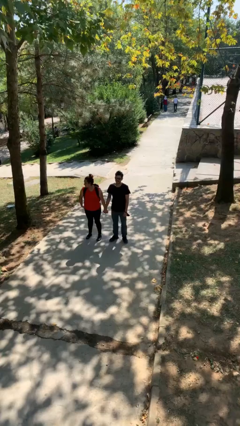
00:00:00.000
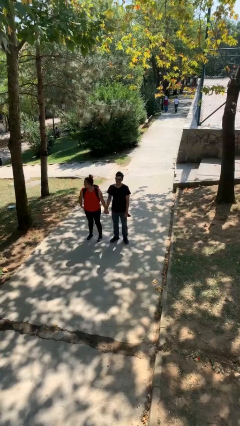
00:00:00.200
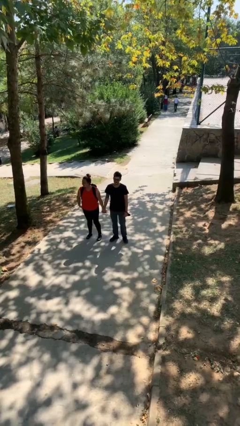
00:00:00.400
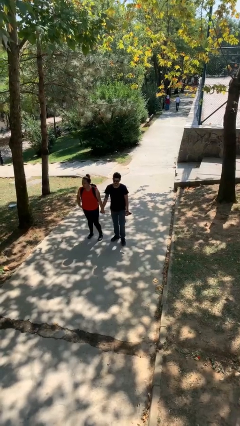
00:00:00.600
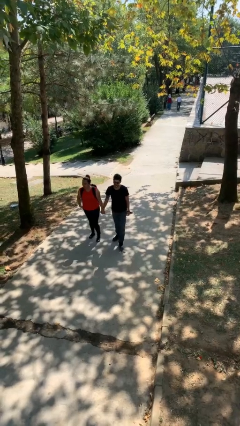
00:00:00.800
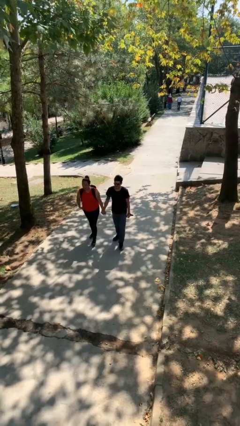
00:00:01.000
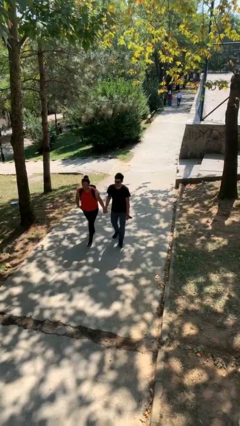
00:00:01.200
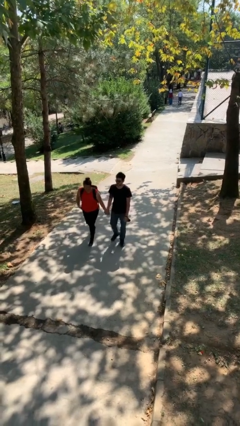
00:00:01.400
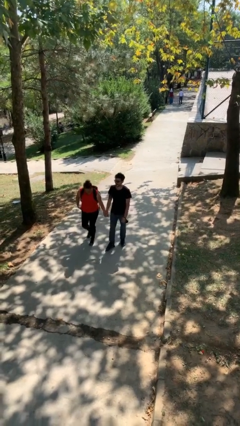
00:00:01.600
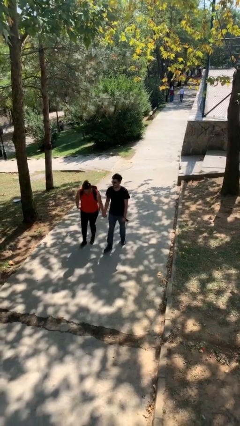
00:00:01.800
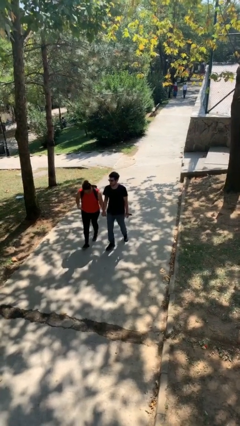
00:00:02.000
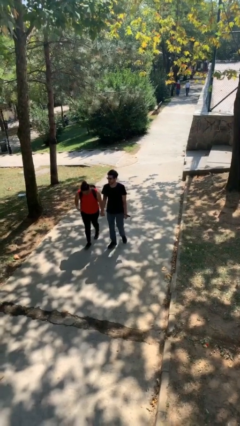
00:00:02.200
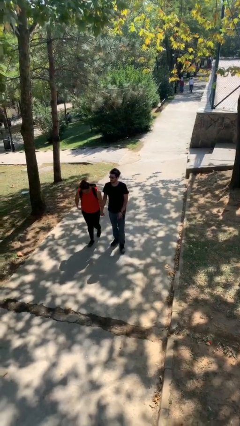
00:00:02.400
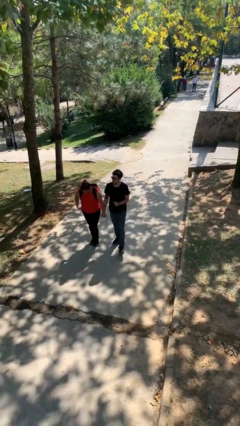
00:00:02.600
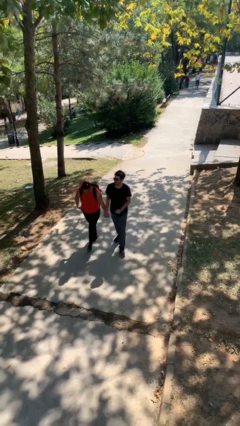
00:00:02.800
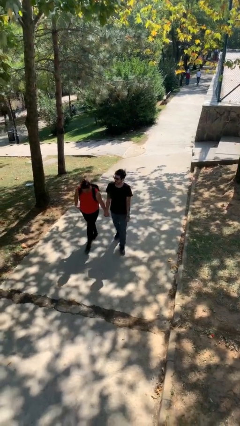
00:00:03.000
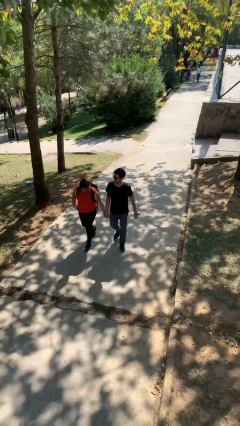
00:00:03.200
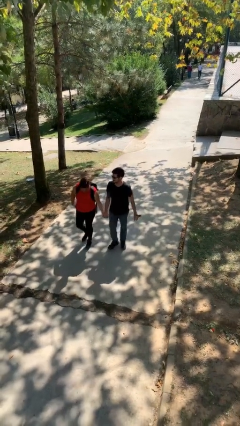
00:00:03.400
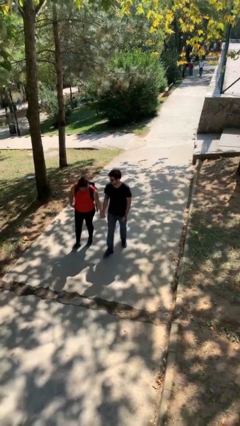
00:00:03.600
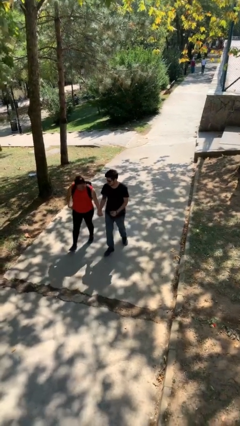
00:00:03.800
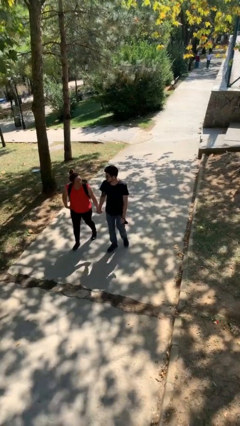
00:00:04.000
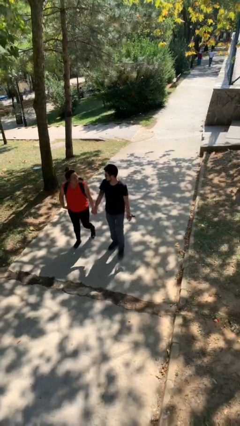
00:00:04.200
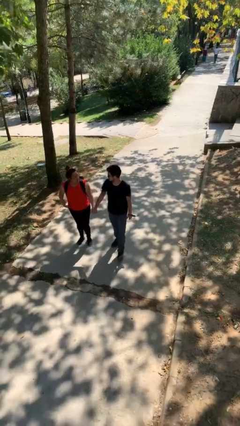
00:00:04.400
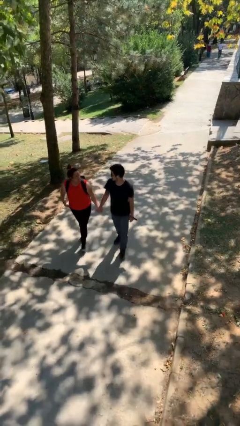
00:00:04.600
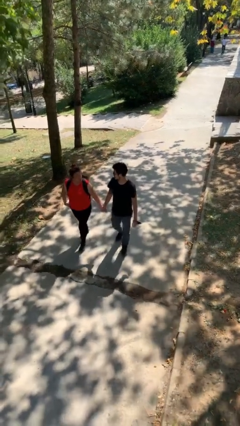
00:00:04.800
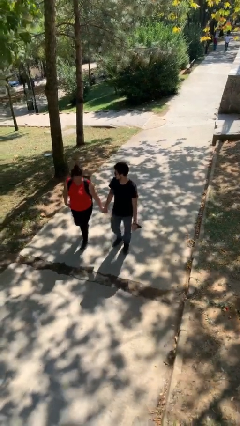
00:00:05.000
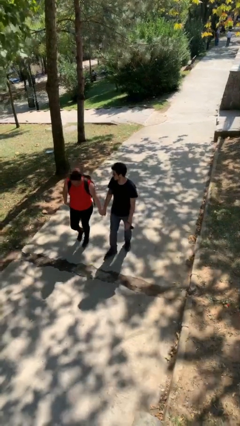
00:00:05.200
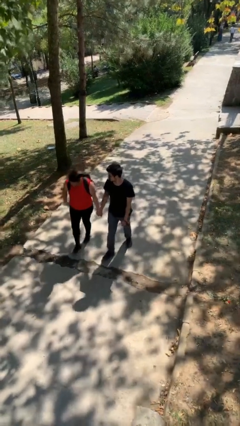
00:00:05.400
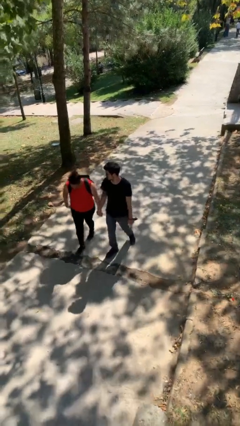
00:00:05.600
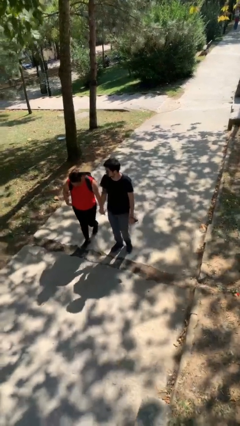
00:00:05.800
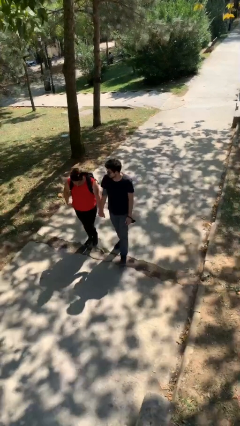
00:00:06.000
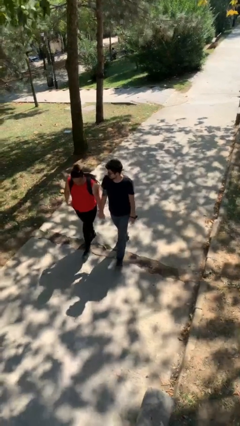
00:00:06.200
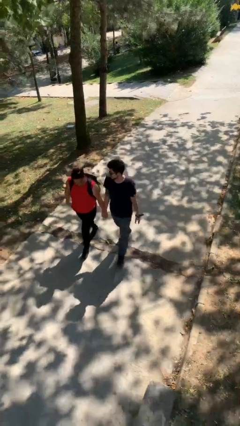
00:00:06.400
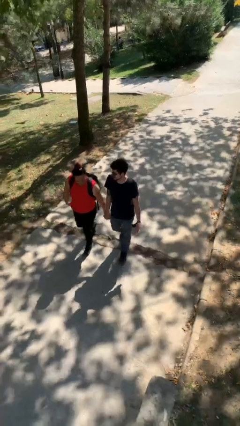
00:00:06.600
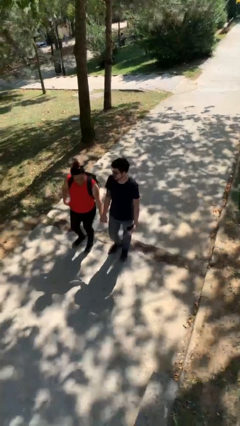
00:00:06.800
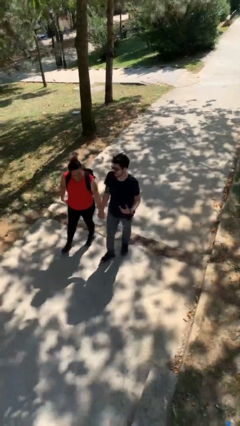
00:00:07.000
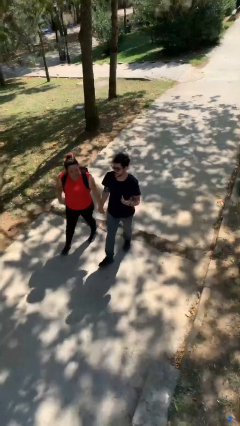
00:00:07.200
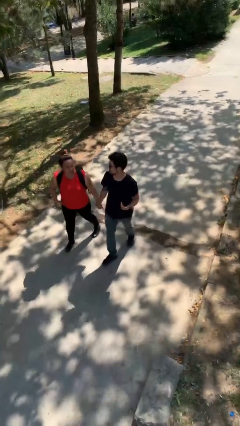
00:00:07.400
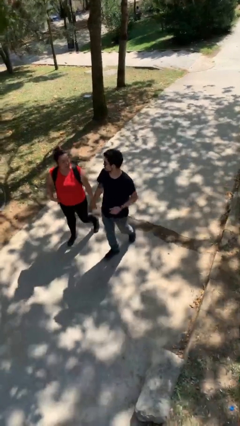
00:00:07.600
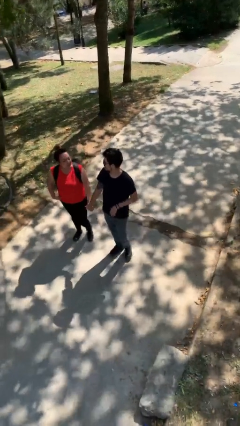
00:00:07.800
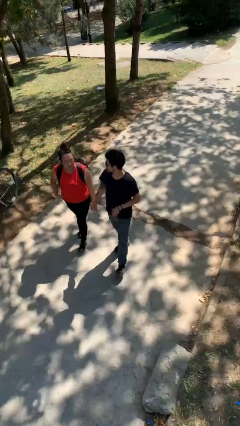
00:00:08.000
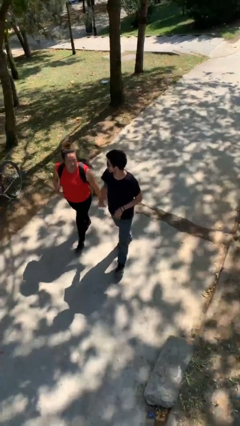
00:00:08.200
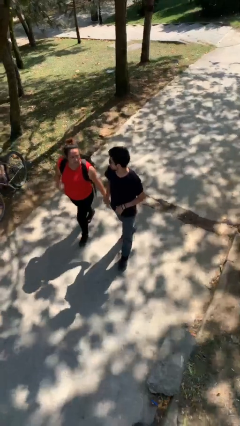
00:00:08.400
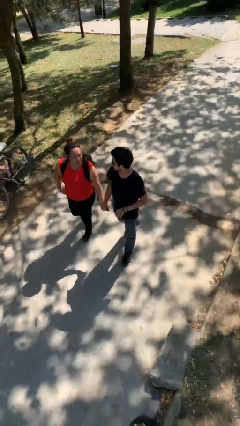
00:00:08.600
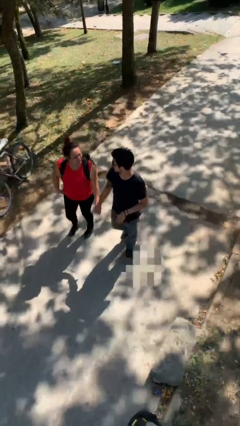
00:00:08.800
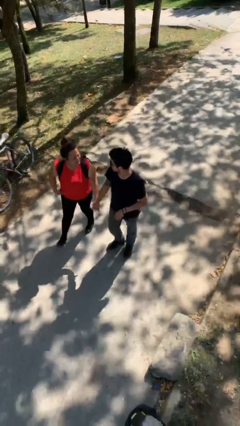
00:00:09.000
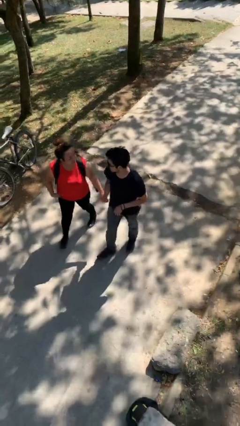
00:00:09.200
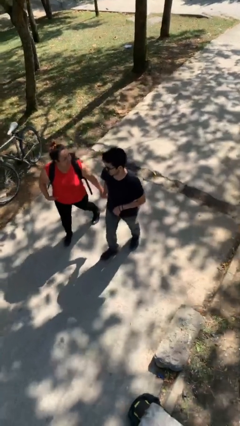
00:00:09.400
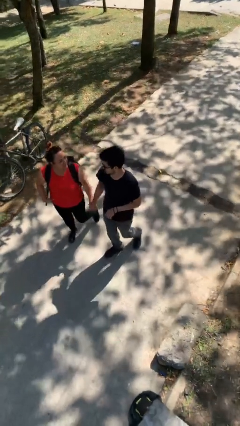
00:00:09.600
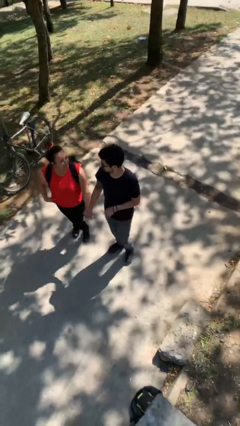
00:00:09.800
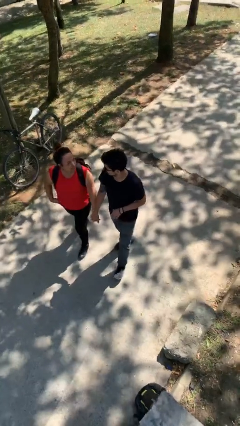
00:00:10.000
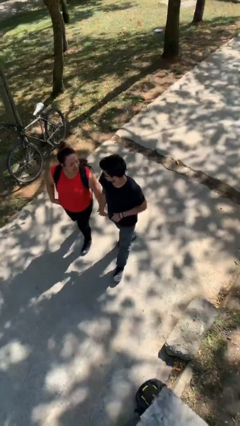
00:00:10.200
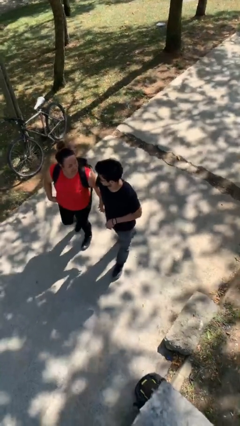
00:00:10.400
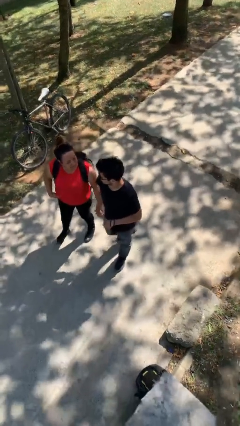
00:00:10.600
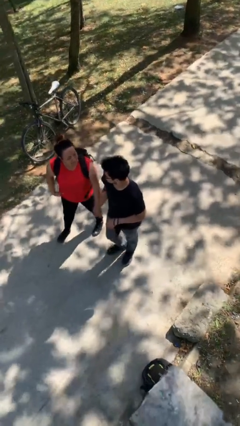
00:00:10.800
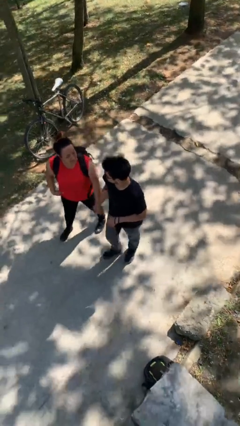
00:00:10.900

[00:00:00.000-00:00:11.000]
person holds hand

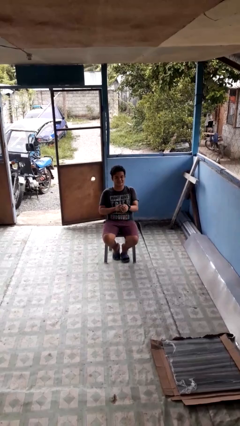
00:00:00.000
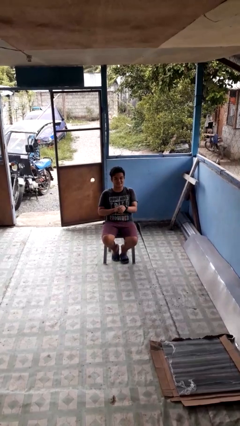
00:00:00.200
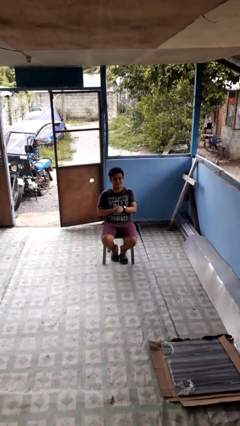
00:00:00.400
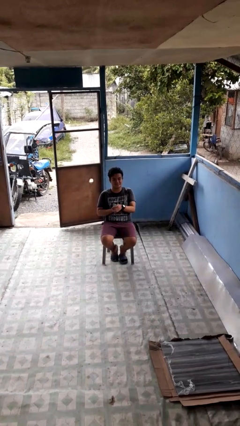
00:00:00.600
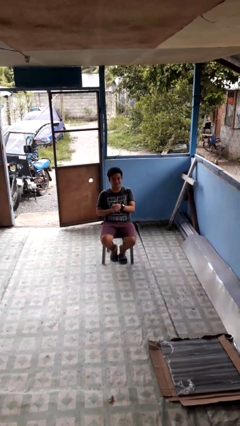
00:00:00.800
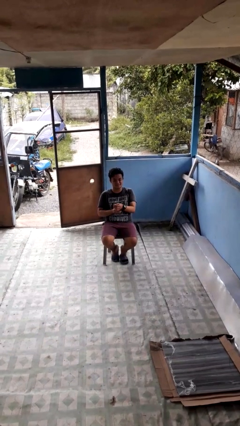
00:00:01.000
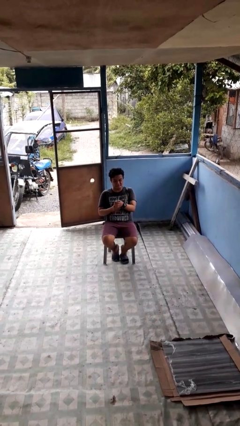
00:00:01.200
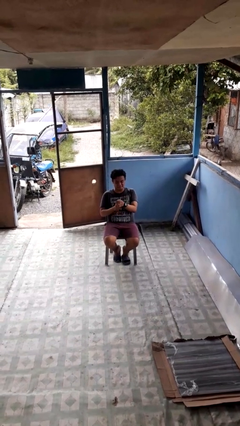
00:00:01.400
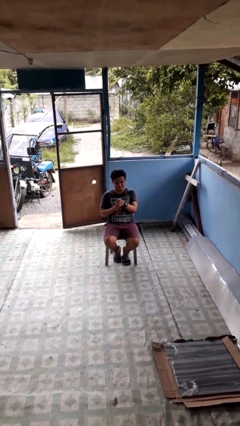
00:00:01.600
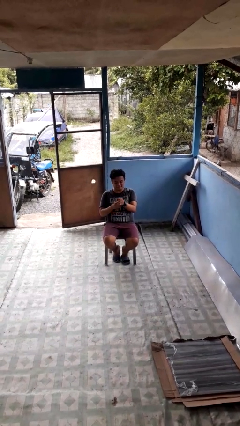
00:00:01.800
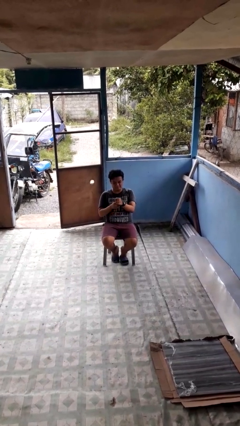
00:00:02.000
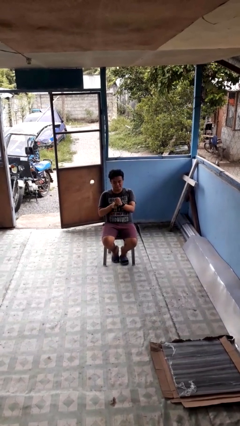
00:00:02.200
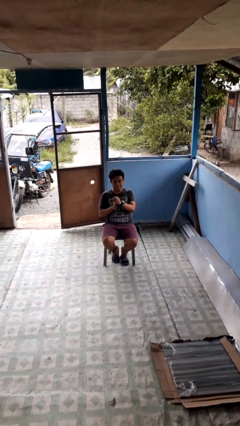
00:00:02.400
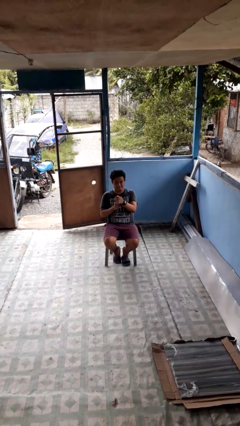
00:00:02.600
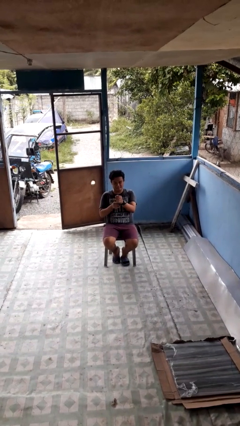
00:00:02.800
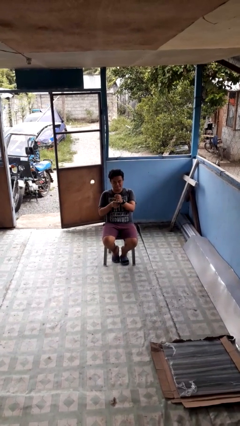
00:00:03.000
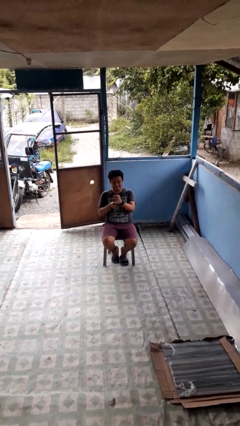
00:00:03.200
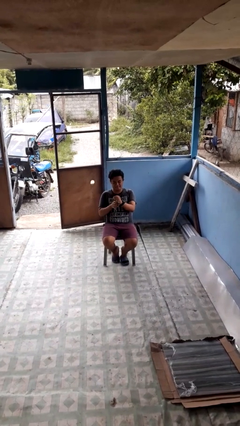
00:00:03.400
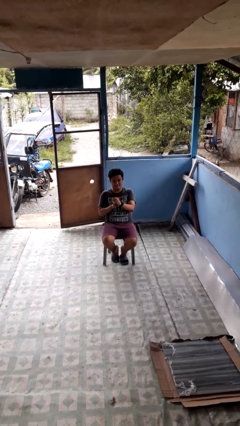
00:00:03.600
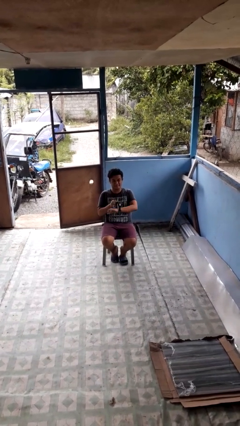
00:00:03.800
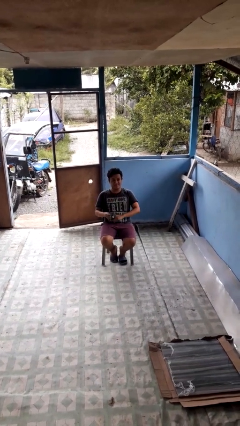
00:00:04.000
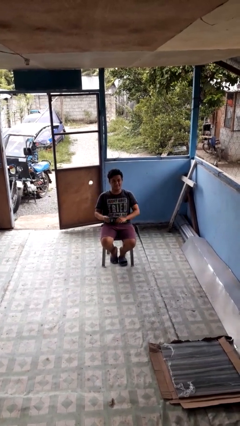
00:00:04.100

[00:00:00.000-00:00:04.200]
person takes off wristwatch

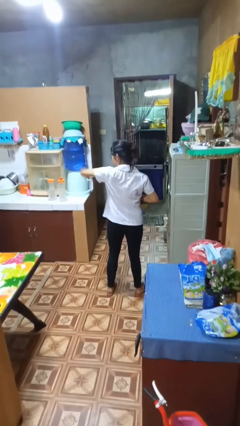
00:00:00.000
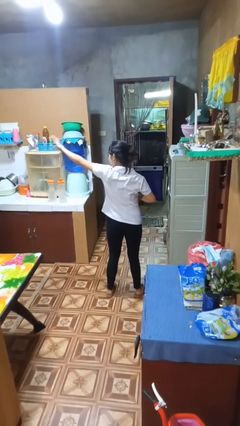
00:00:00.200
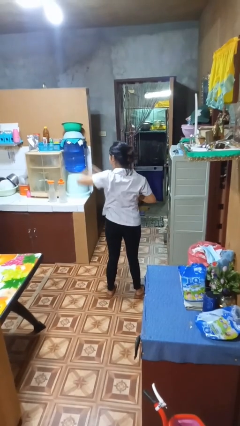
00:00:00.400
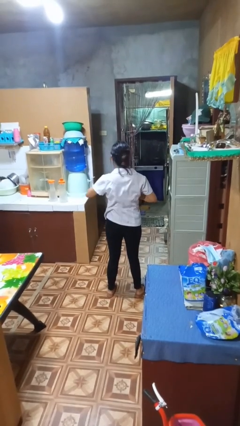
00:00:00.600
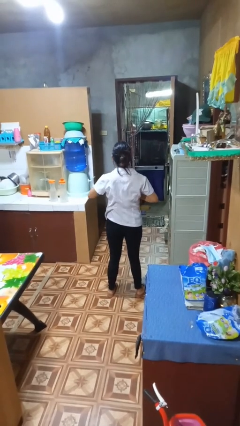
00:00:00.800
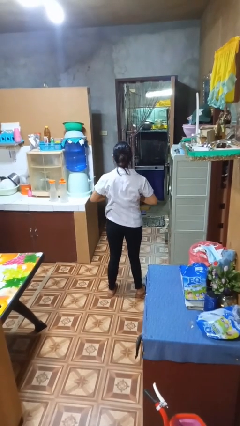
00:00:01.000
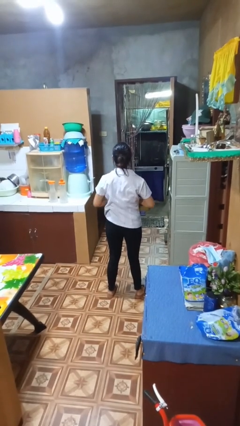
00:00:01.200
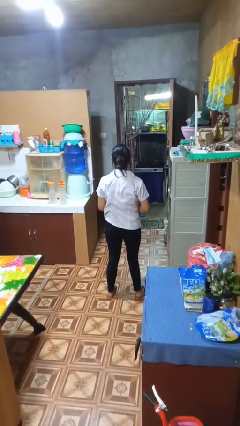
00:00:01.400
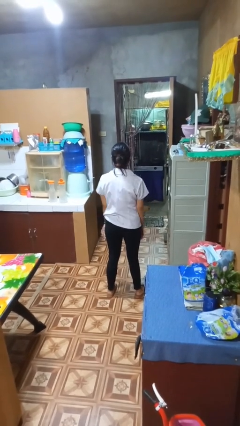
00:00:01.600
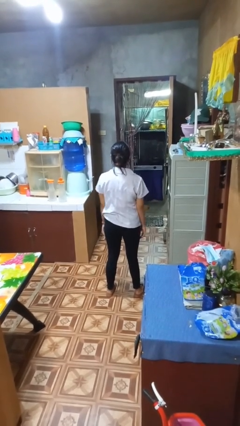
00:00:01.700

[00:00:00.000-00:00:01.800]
person karate chop

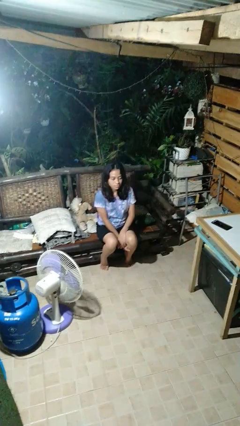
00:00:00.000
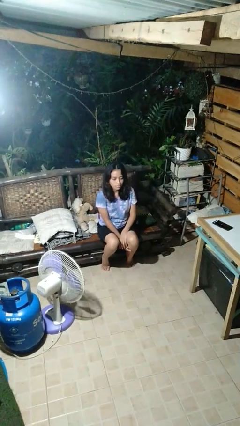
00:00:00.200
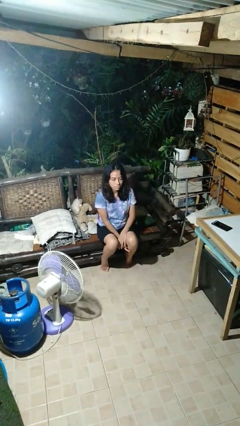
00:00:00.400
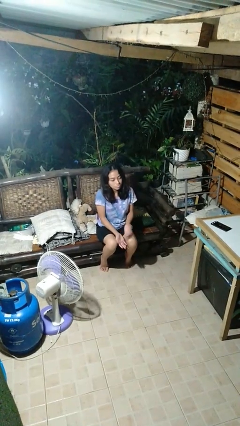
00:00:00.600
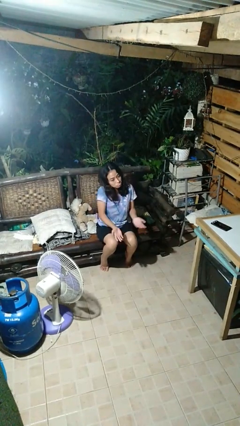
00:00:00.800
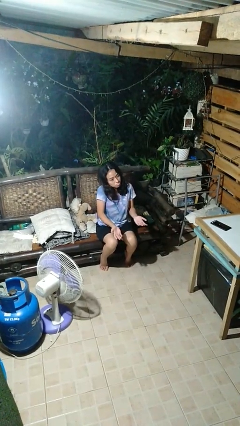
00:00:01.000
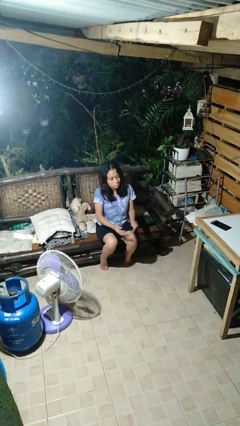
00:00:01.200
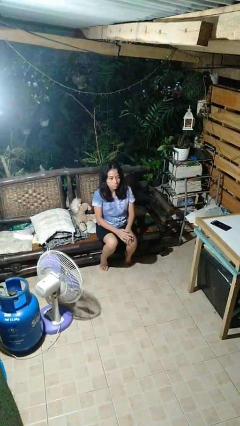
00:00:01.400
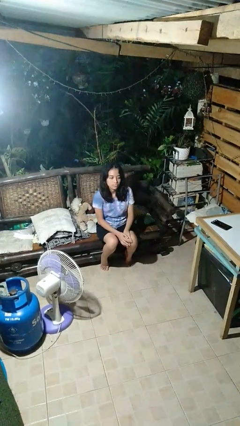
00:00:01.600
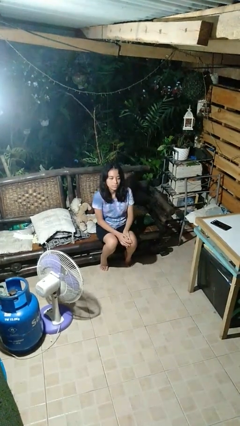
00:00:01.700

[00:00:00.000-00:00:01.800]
person shrugs
